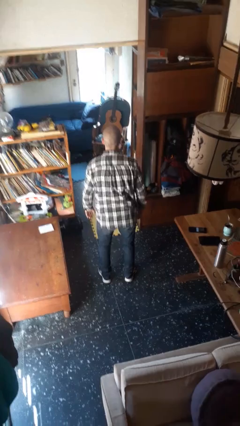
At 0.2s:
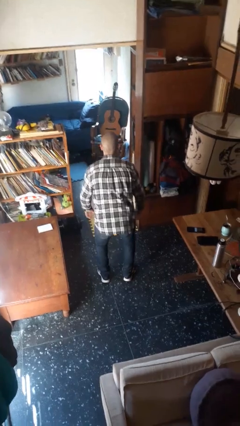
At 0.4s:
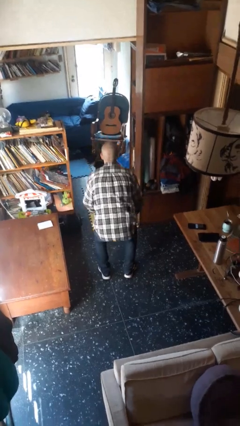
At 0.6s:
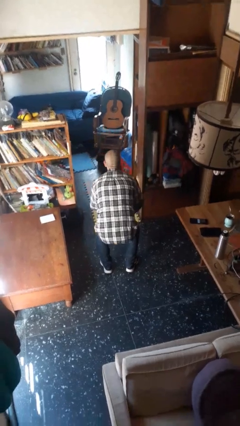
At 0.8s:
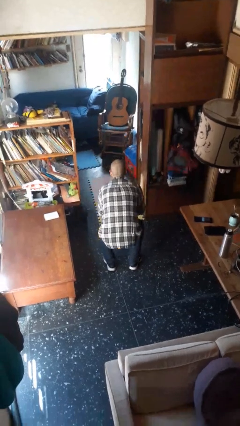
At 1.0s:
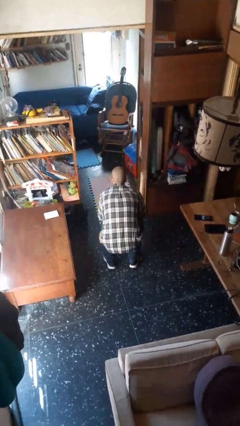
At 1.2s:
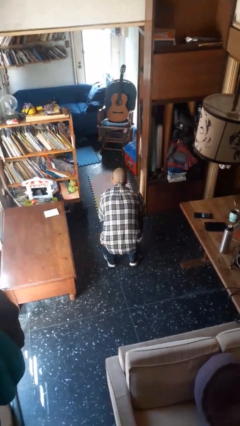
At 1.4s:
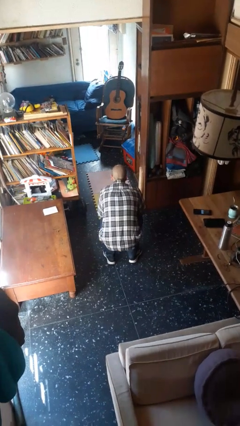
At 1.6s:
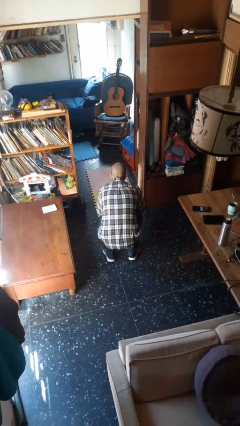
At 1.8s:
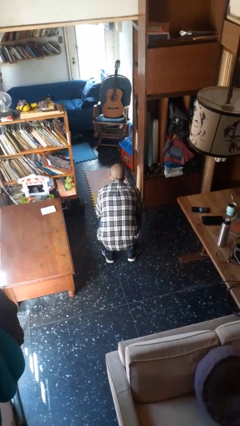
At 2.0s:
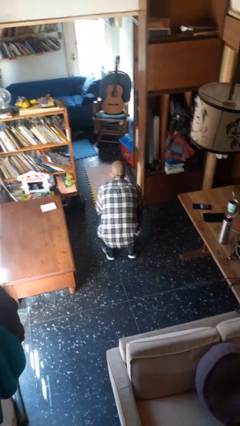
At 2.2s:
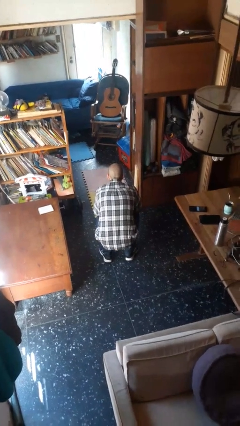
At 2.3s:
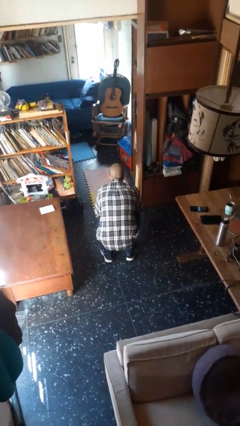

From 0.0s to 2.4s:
person squats

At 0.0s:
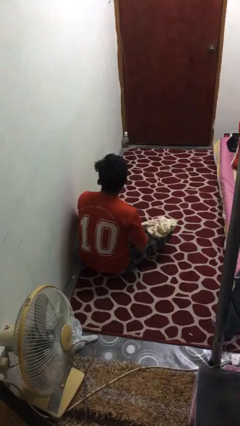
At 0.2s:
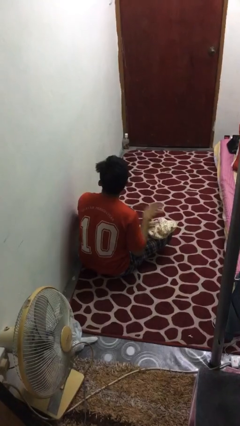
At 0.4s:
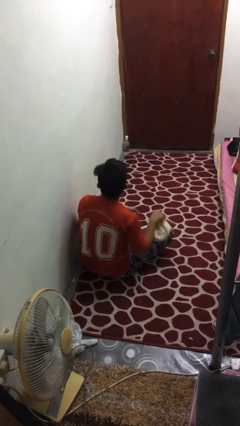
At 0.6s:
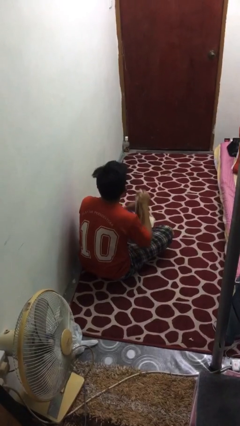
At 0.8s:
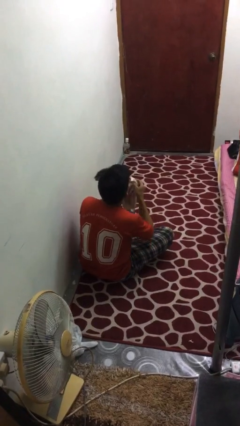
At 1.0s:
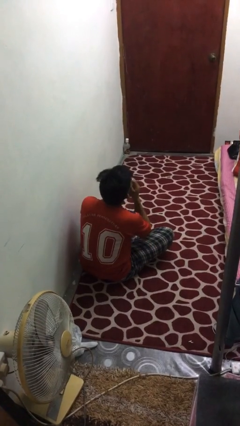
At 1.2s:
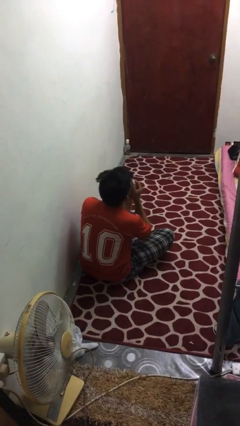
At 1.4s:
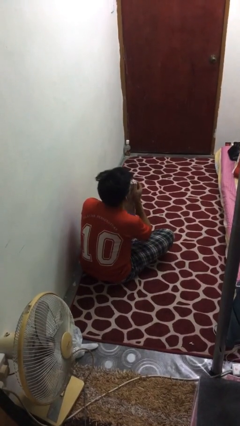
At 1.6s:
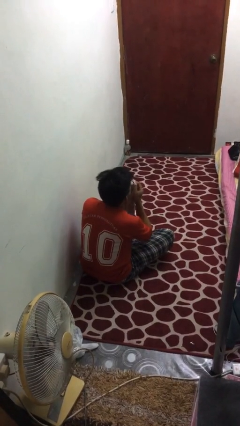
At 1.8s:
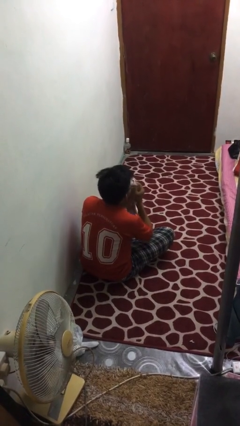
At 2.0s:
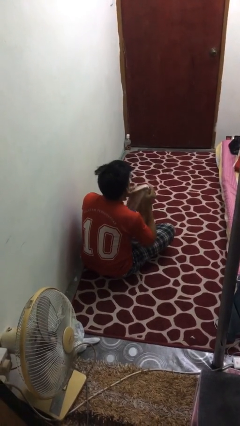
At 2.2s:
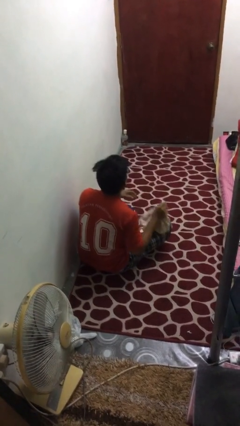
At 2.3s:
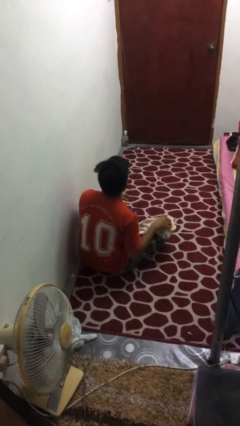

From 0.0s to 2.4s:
person wipes mouth with napkin

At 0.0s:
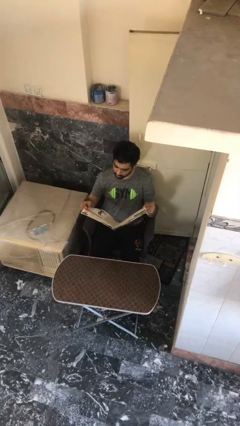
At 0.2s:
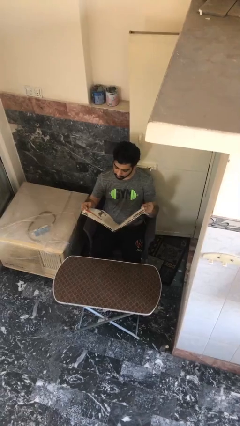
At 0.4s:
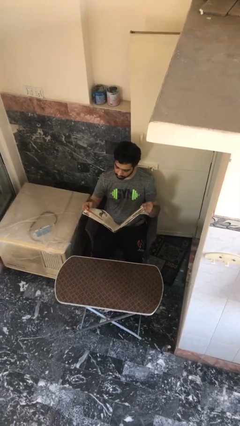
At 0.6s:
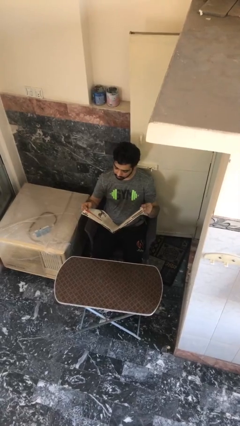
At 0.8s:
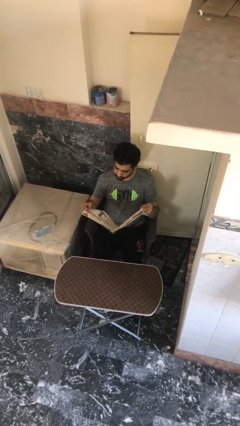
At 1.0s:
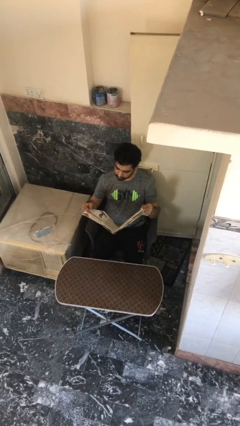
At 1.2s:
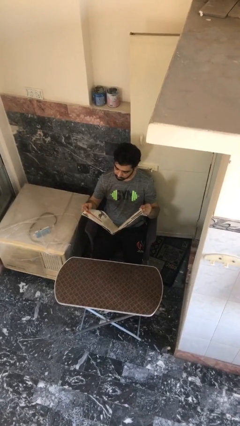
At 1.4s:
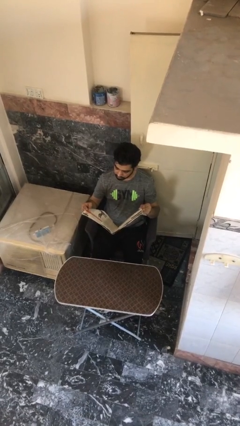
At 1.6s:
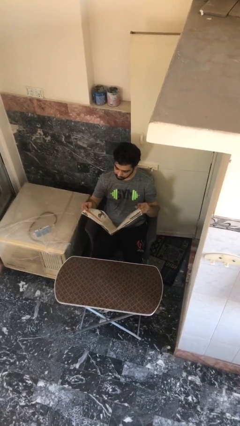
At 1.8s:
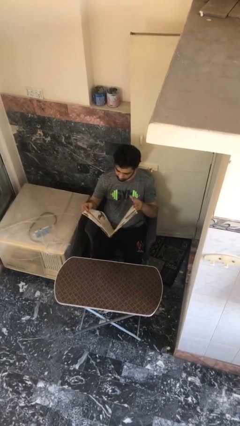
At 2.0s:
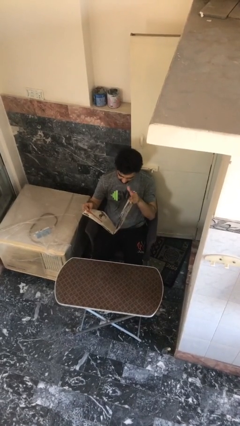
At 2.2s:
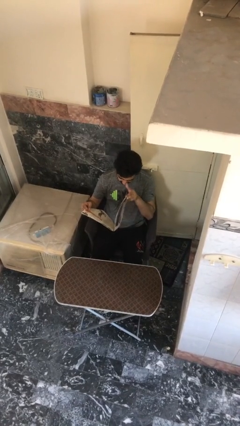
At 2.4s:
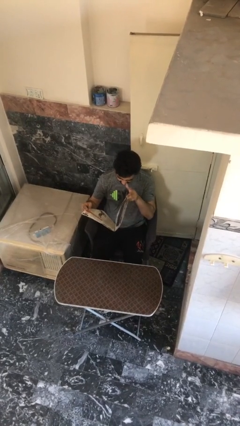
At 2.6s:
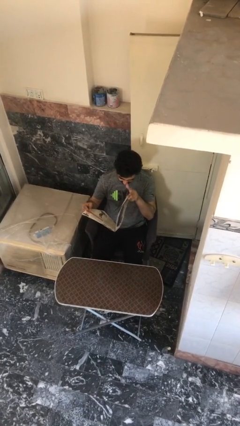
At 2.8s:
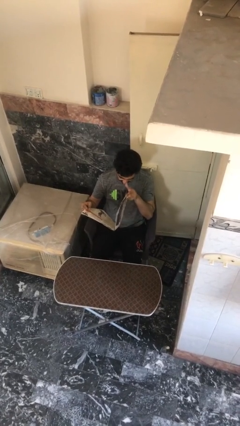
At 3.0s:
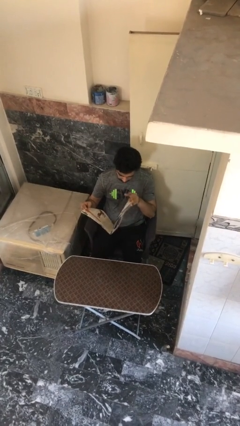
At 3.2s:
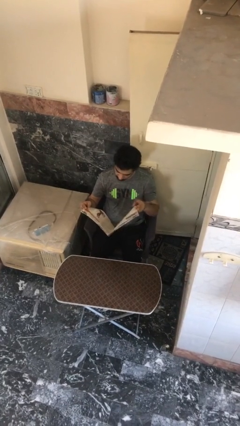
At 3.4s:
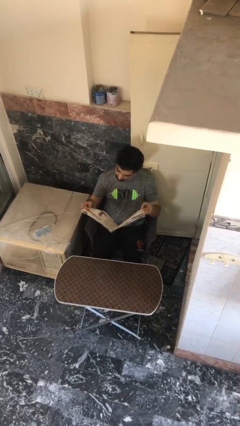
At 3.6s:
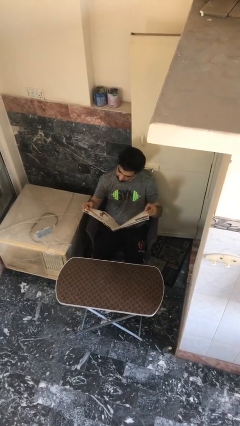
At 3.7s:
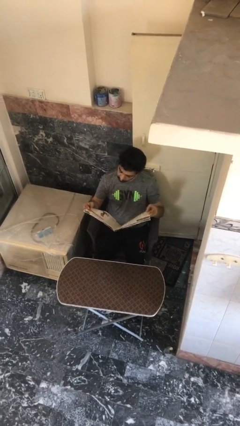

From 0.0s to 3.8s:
person reads document

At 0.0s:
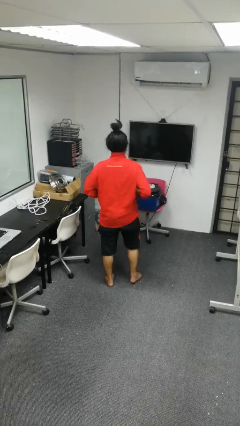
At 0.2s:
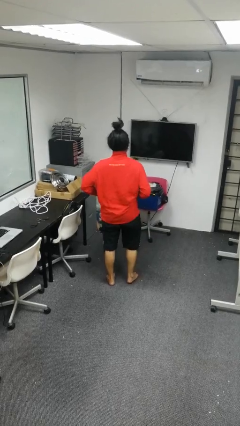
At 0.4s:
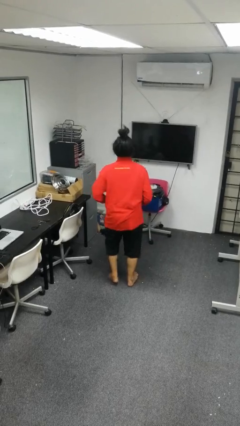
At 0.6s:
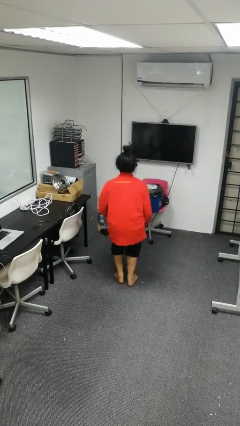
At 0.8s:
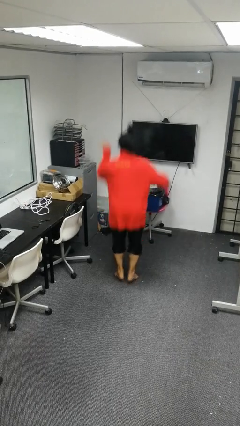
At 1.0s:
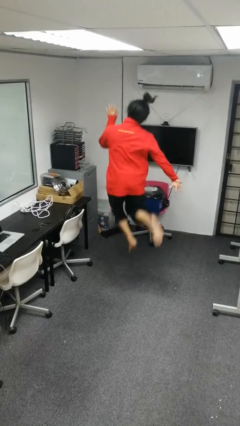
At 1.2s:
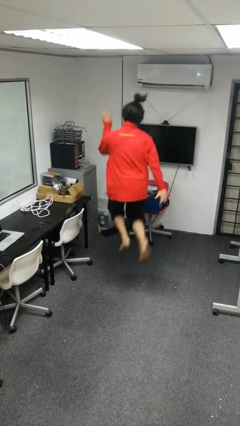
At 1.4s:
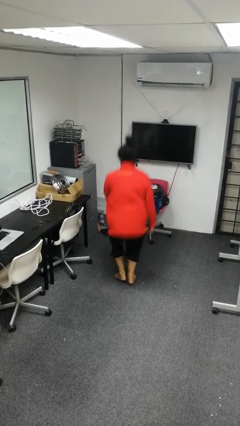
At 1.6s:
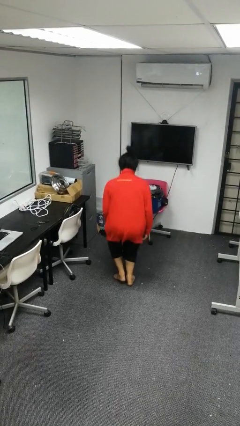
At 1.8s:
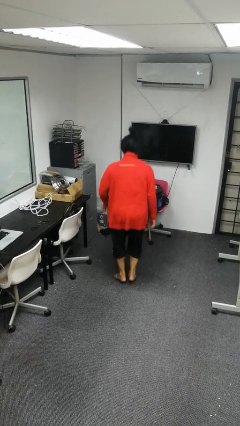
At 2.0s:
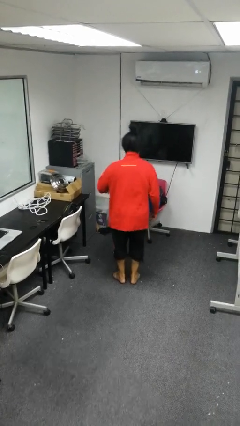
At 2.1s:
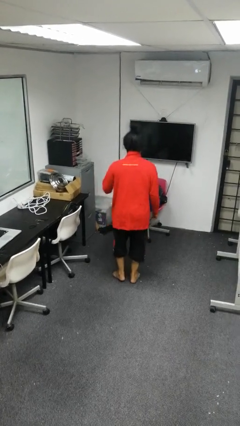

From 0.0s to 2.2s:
person jumps

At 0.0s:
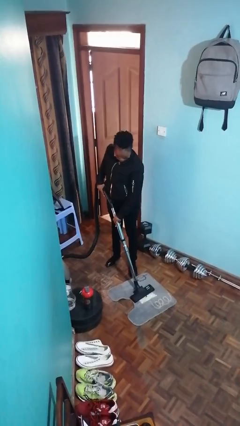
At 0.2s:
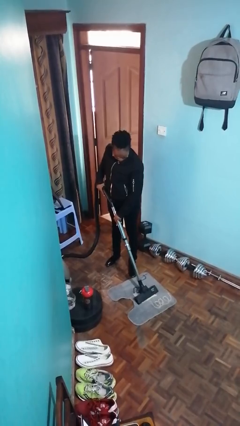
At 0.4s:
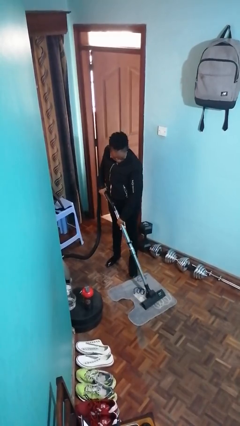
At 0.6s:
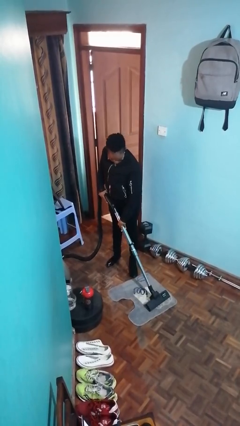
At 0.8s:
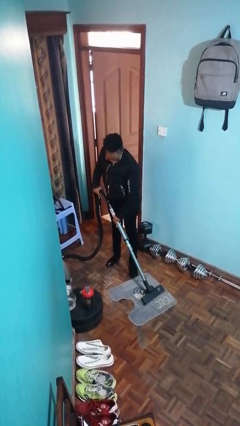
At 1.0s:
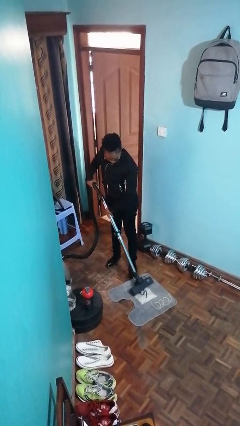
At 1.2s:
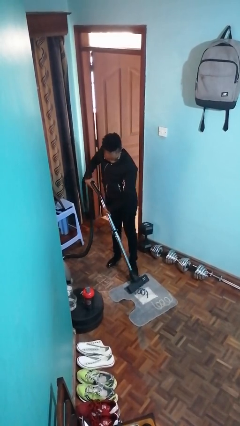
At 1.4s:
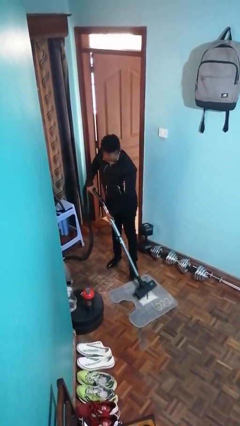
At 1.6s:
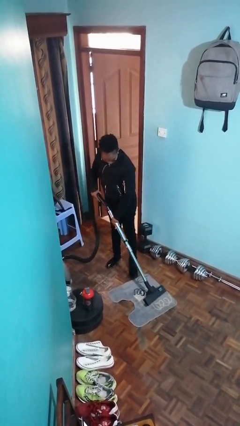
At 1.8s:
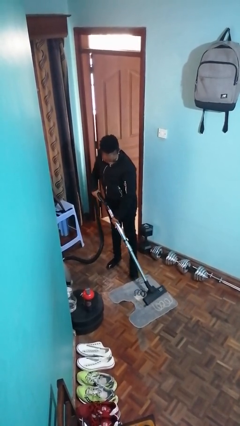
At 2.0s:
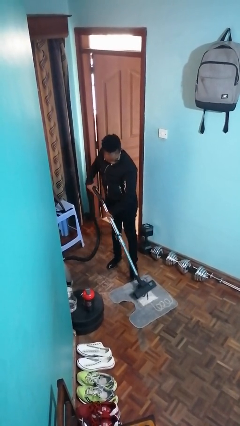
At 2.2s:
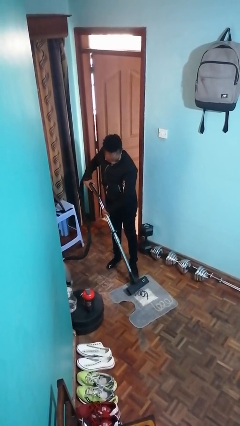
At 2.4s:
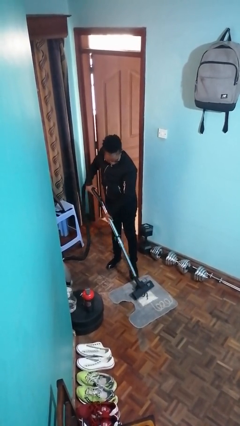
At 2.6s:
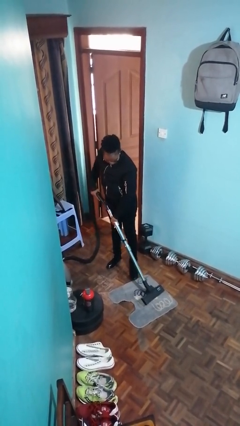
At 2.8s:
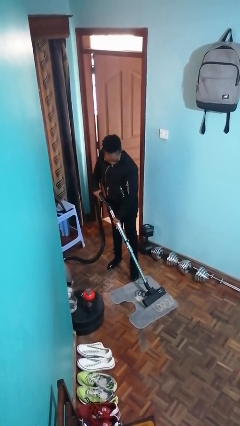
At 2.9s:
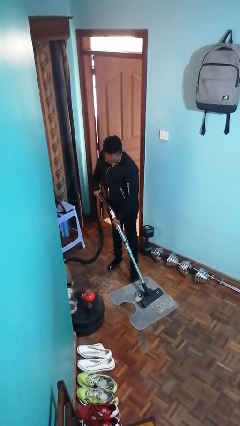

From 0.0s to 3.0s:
person vacuums carpet

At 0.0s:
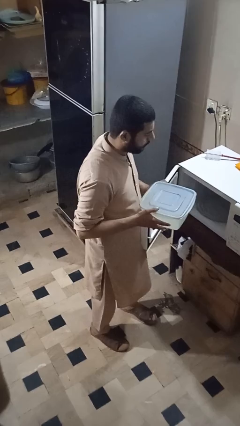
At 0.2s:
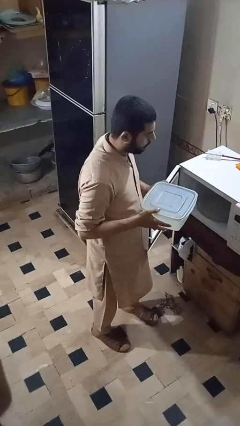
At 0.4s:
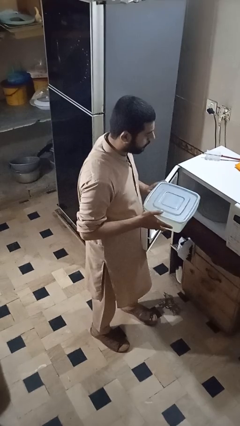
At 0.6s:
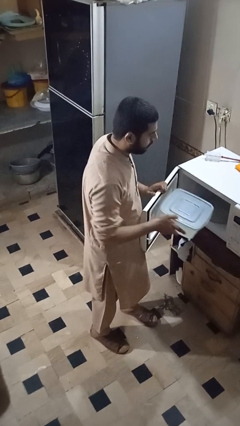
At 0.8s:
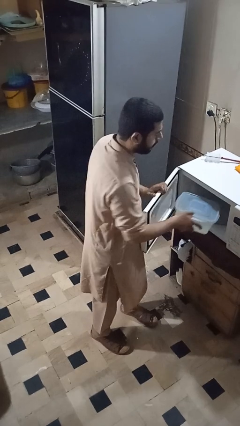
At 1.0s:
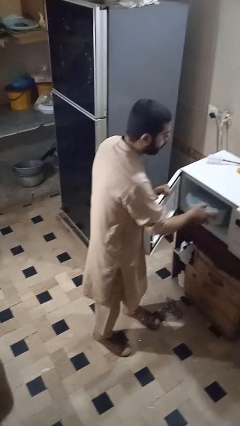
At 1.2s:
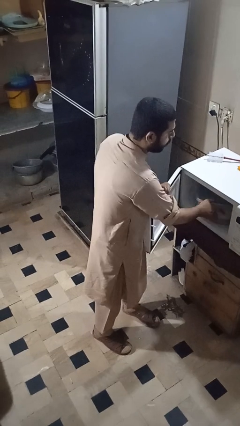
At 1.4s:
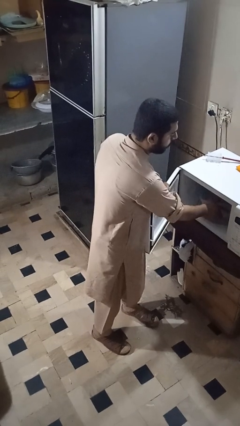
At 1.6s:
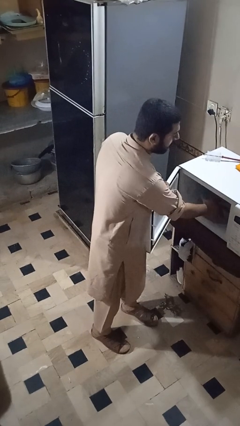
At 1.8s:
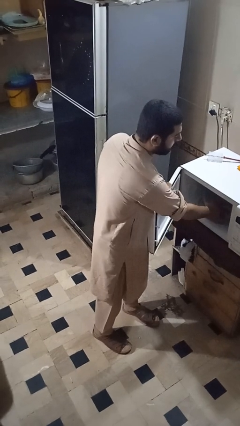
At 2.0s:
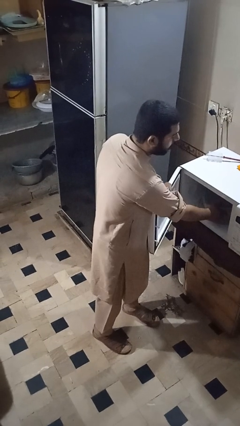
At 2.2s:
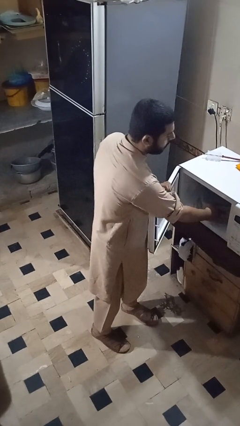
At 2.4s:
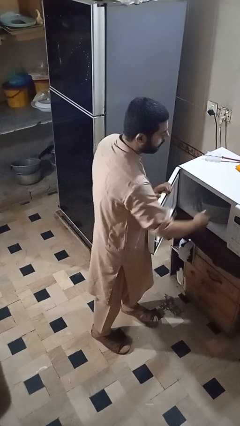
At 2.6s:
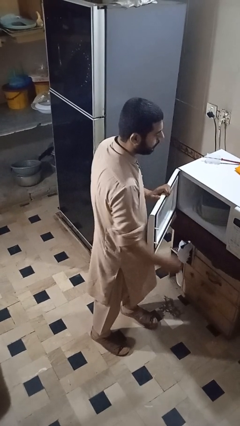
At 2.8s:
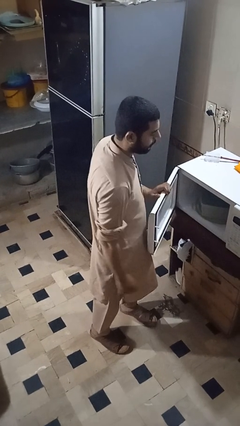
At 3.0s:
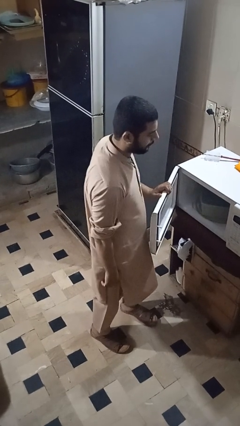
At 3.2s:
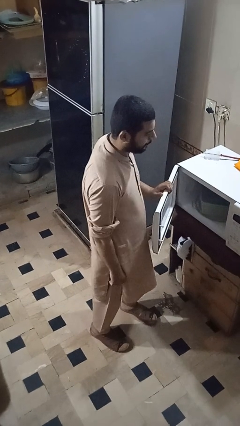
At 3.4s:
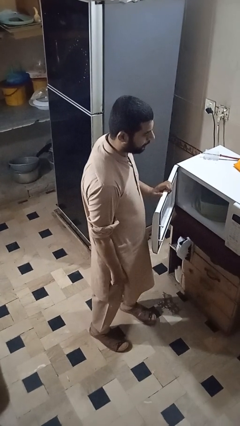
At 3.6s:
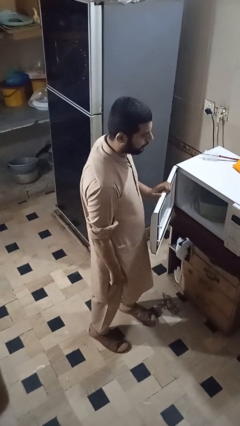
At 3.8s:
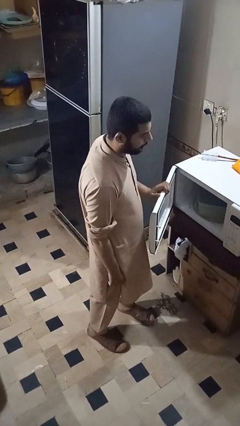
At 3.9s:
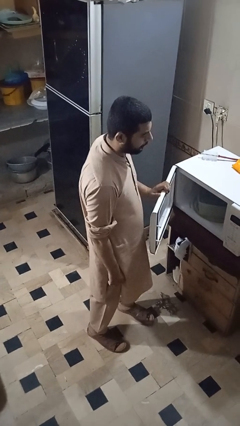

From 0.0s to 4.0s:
person puts object into microwave
